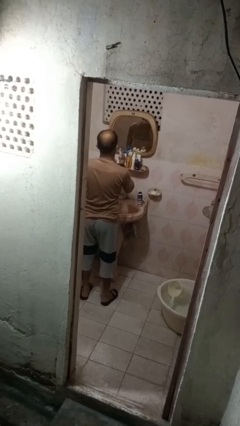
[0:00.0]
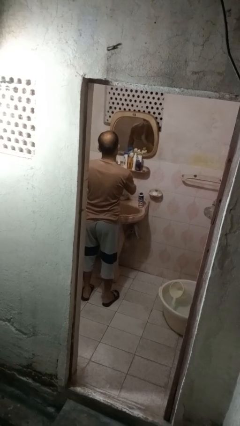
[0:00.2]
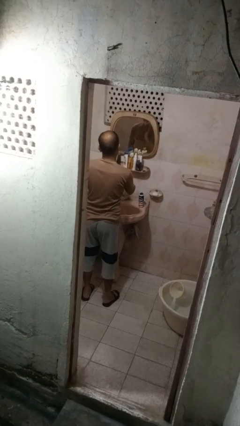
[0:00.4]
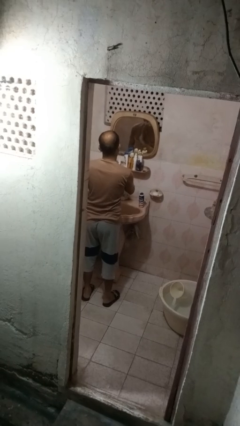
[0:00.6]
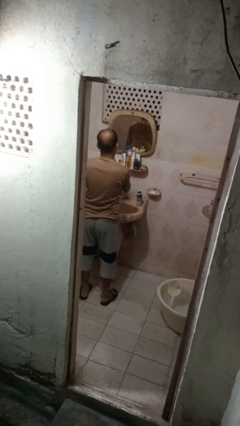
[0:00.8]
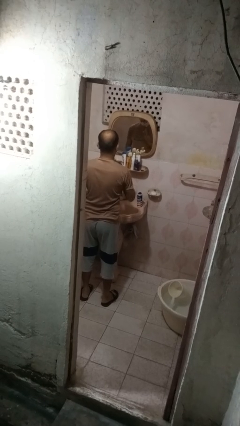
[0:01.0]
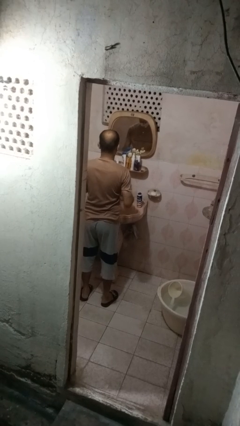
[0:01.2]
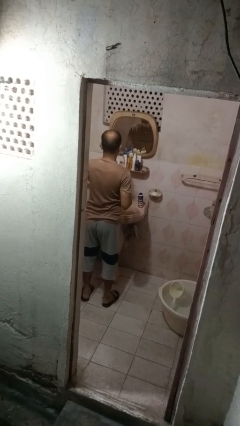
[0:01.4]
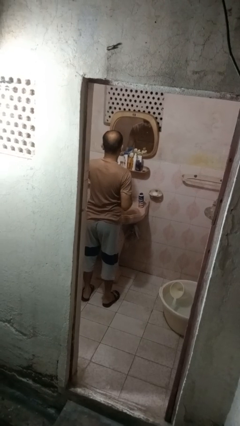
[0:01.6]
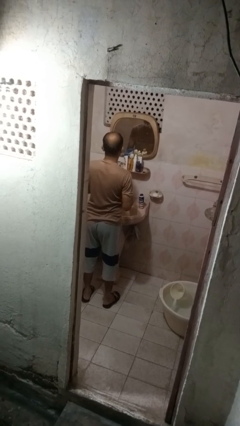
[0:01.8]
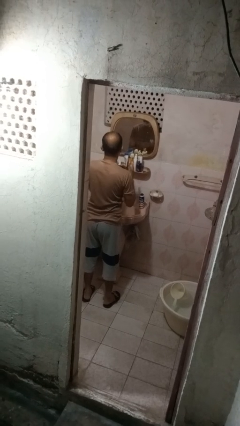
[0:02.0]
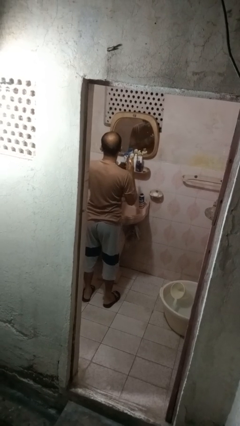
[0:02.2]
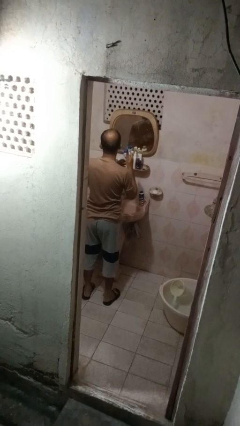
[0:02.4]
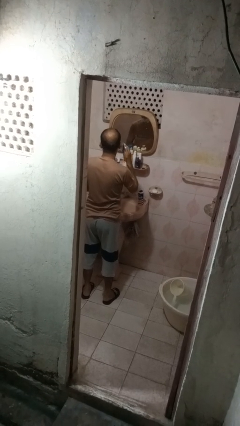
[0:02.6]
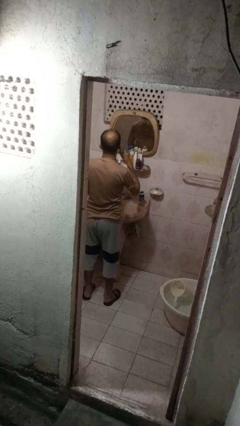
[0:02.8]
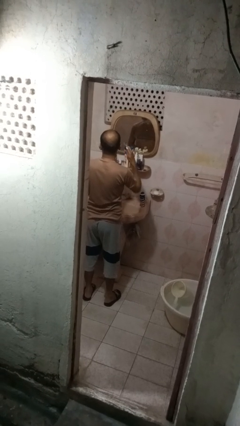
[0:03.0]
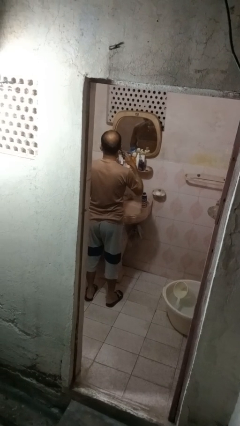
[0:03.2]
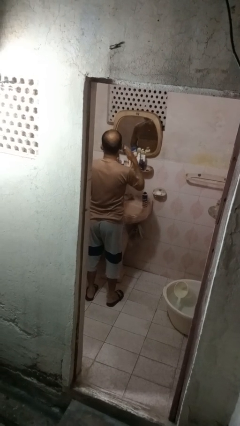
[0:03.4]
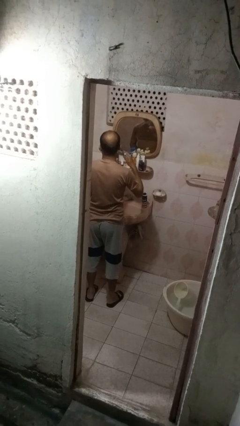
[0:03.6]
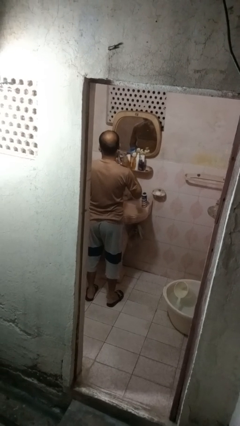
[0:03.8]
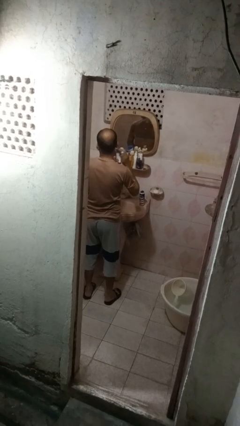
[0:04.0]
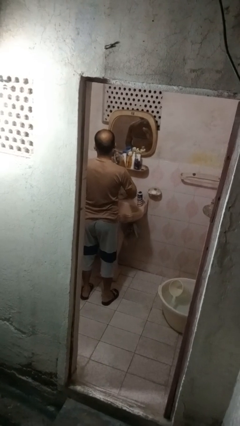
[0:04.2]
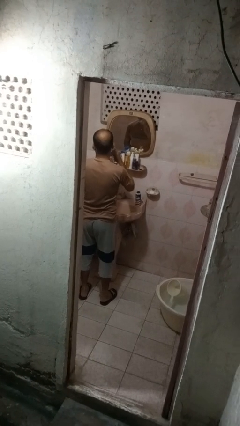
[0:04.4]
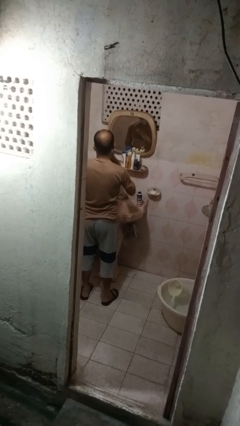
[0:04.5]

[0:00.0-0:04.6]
person shaves face

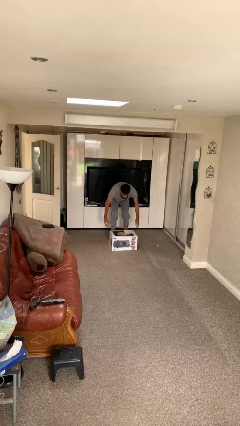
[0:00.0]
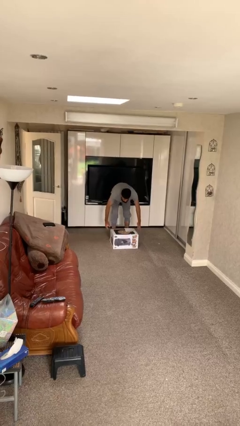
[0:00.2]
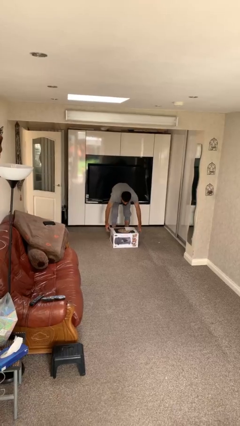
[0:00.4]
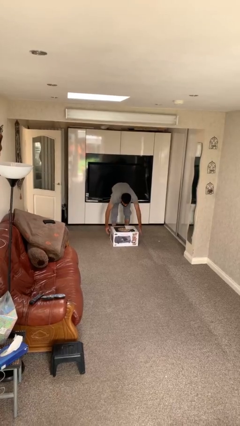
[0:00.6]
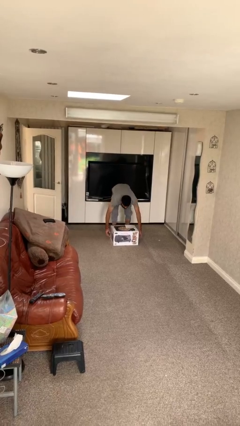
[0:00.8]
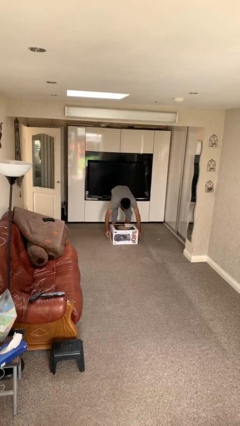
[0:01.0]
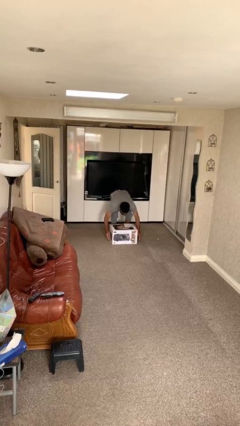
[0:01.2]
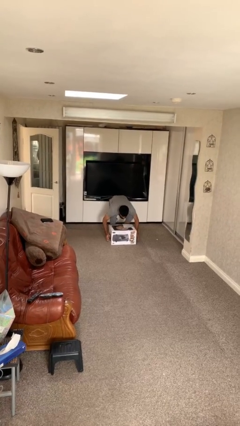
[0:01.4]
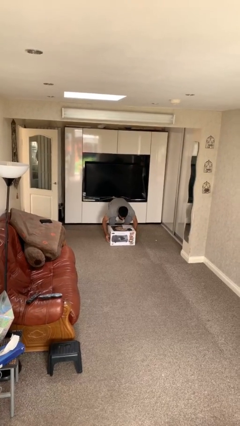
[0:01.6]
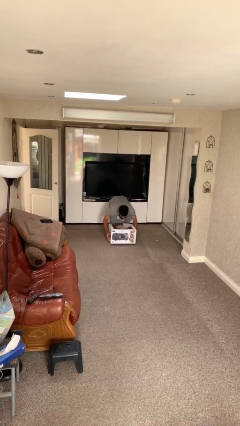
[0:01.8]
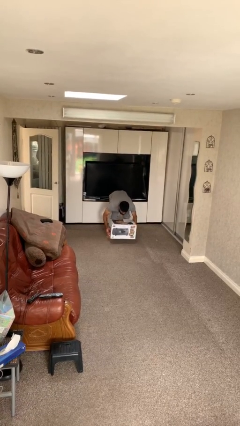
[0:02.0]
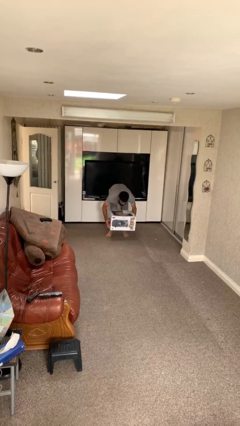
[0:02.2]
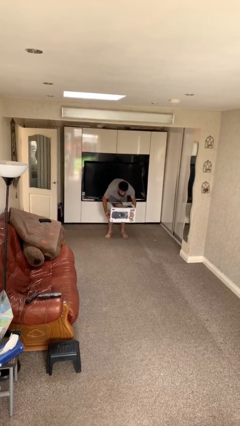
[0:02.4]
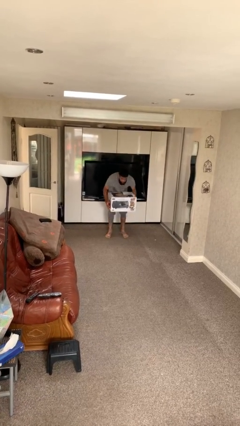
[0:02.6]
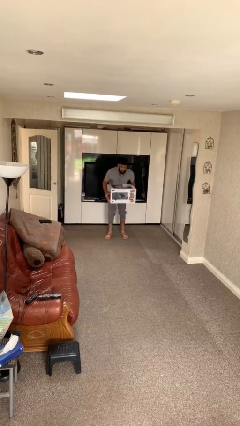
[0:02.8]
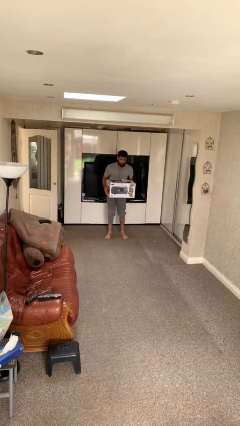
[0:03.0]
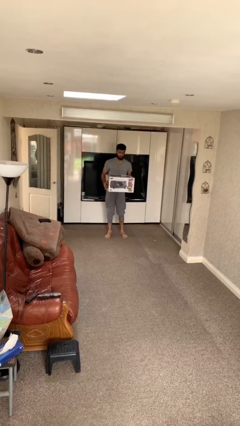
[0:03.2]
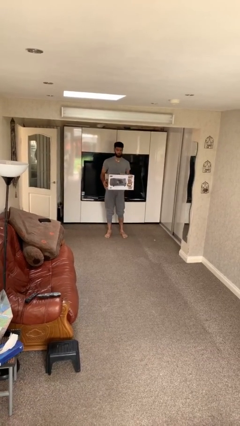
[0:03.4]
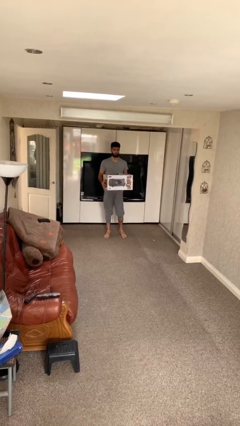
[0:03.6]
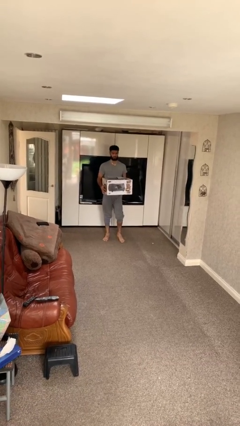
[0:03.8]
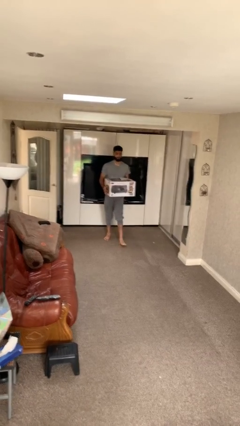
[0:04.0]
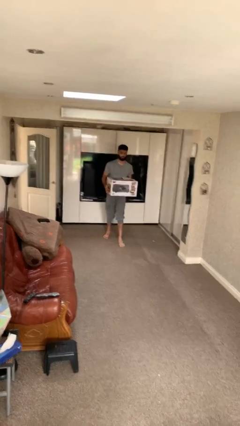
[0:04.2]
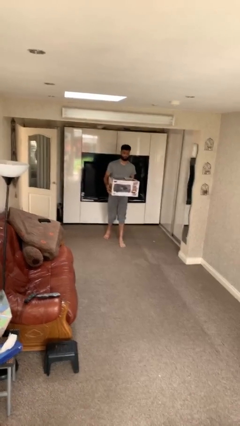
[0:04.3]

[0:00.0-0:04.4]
person picks up object from floor

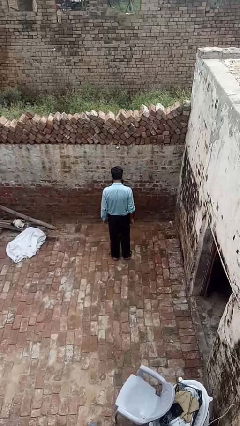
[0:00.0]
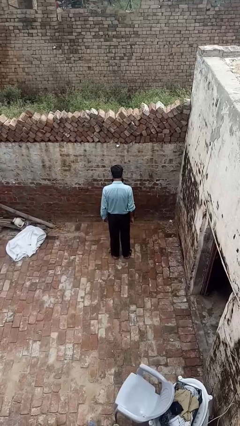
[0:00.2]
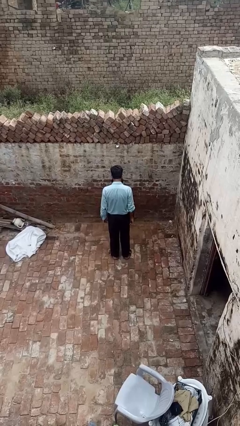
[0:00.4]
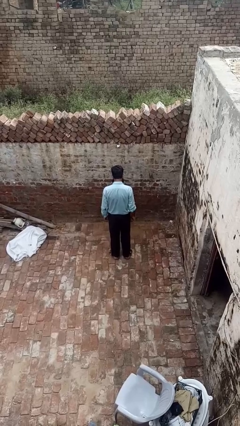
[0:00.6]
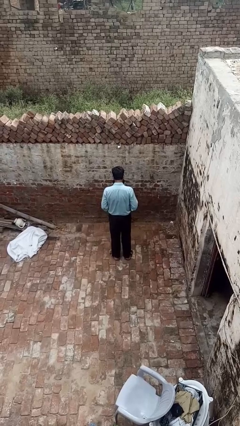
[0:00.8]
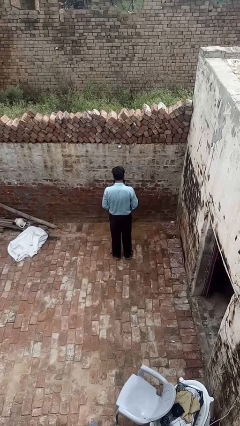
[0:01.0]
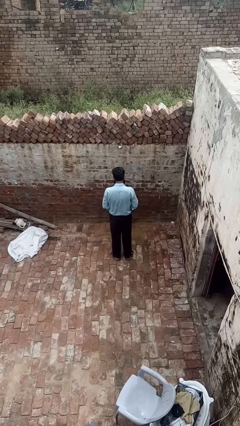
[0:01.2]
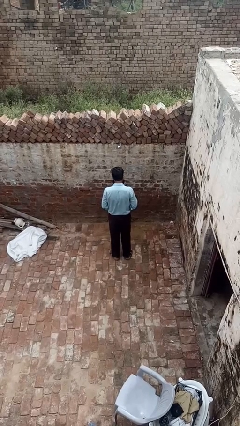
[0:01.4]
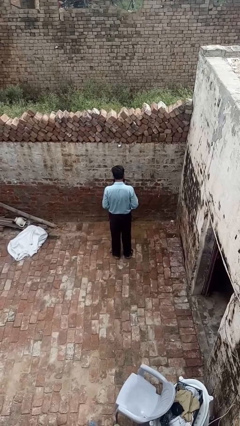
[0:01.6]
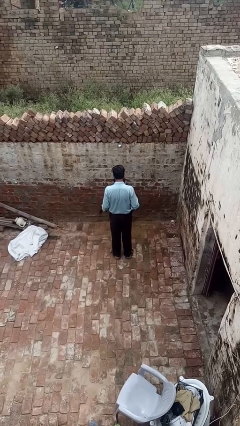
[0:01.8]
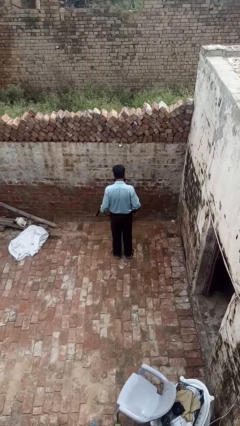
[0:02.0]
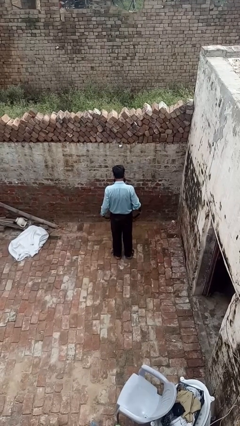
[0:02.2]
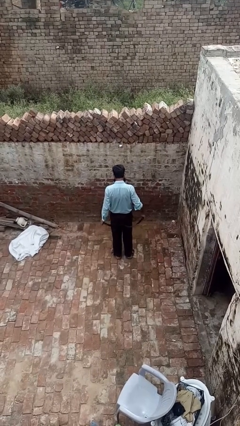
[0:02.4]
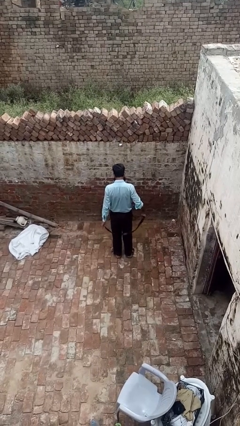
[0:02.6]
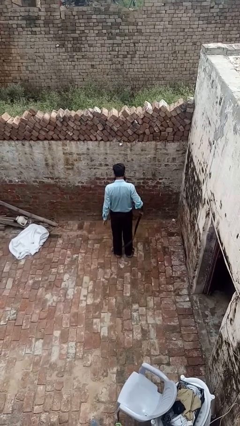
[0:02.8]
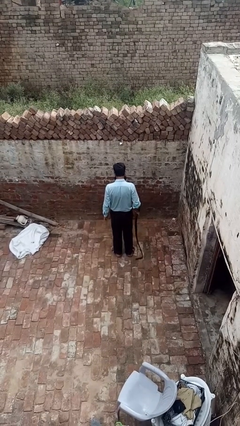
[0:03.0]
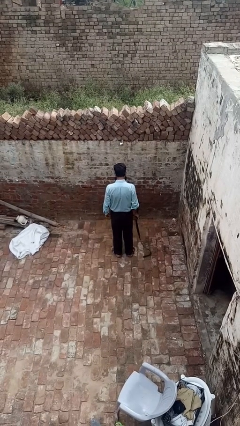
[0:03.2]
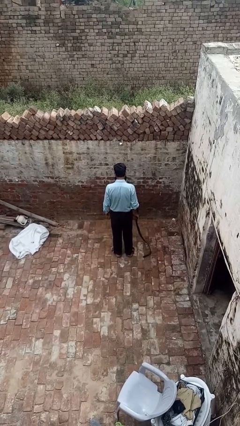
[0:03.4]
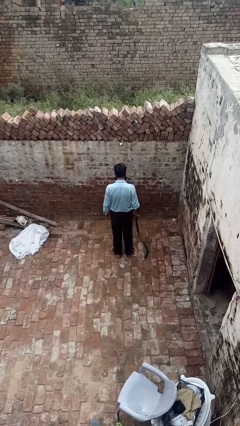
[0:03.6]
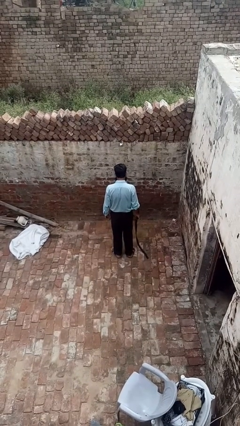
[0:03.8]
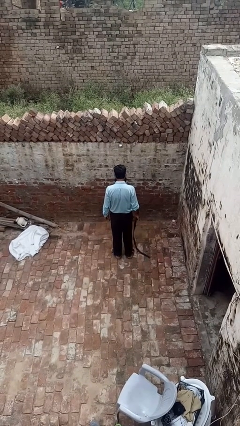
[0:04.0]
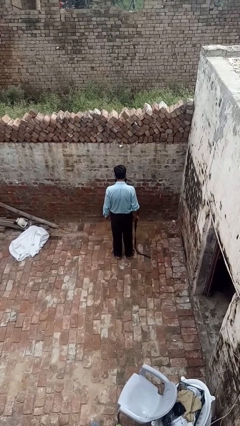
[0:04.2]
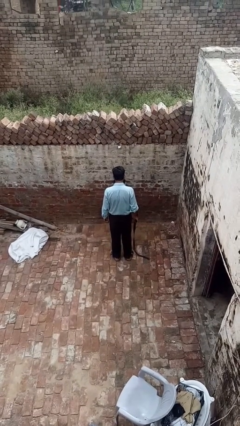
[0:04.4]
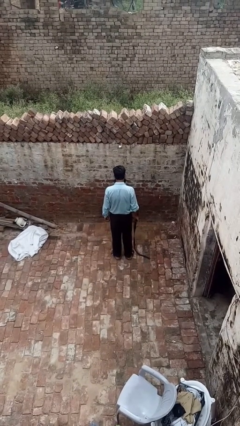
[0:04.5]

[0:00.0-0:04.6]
person takes off belt

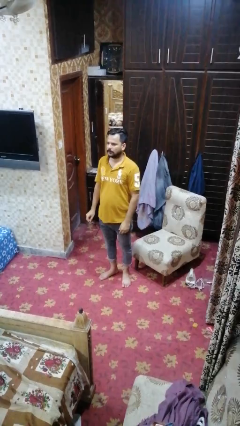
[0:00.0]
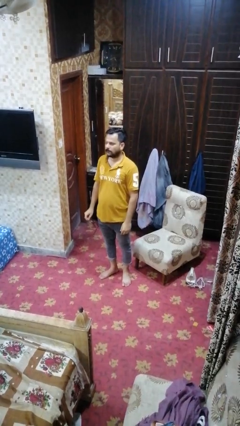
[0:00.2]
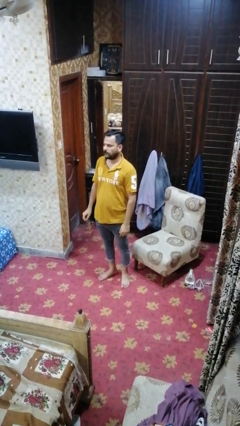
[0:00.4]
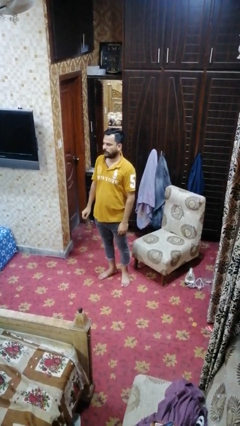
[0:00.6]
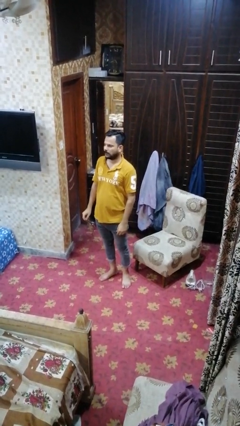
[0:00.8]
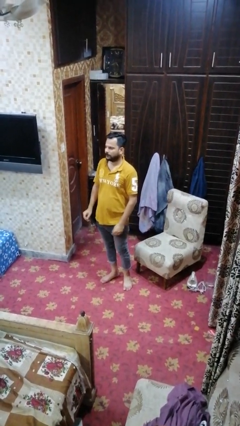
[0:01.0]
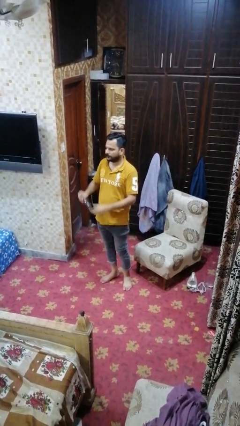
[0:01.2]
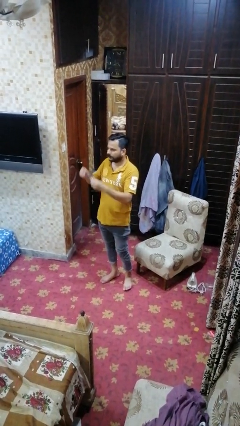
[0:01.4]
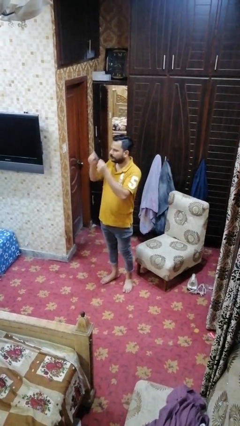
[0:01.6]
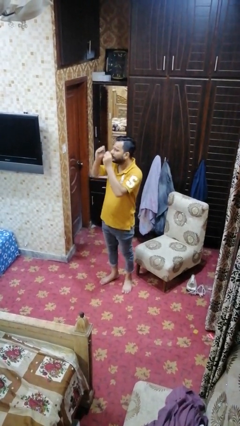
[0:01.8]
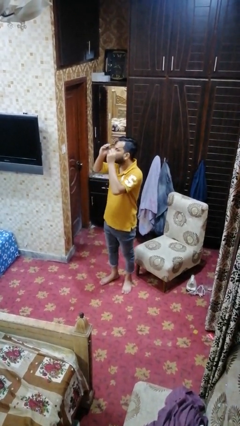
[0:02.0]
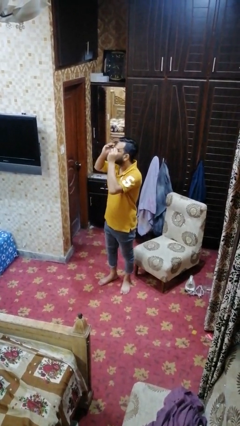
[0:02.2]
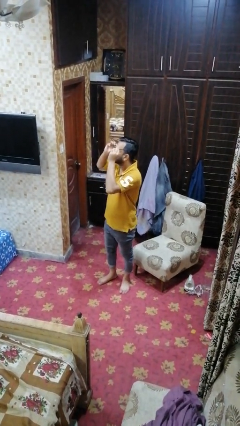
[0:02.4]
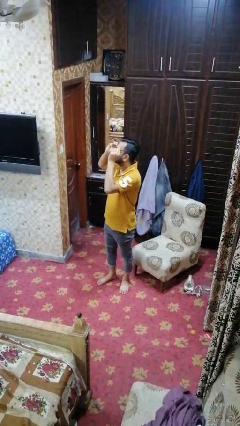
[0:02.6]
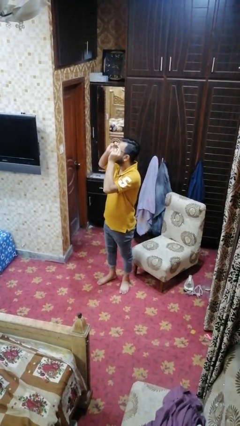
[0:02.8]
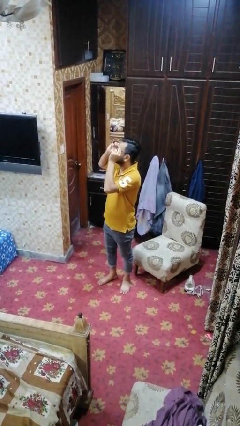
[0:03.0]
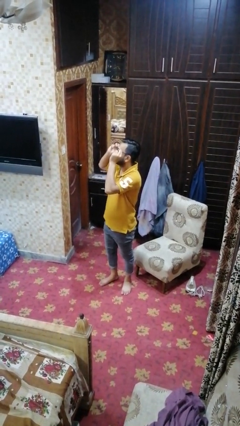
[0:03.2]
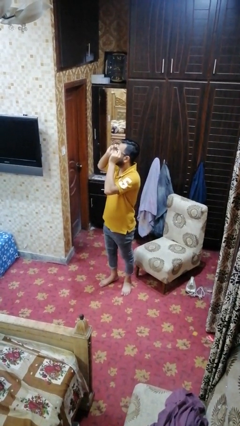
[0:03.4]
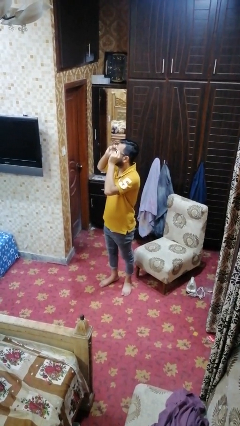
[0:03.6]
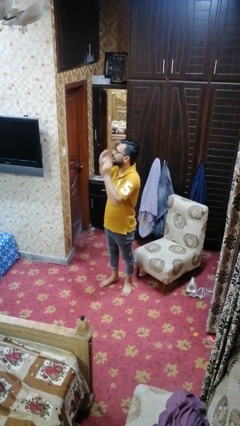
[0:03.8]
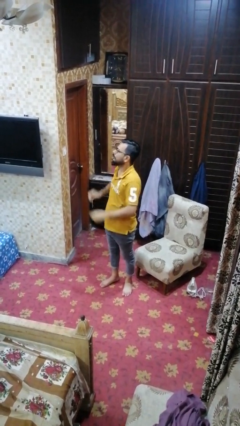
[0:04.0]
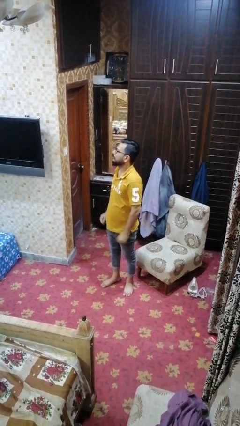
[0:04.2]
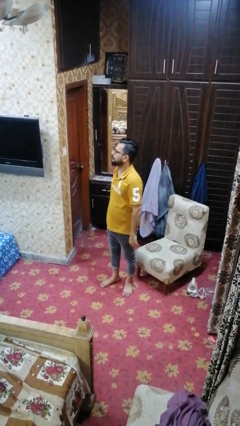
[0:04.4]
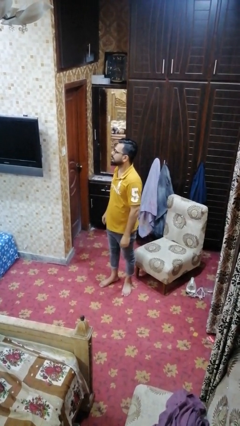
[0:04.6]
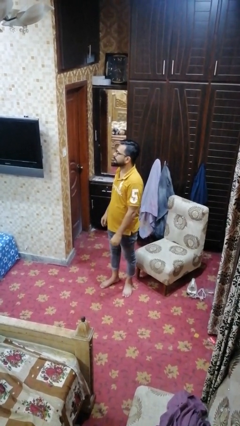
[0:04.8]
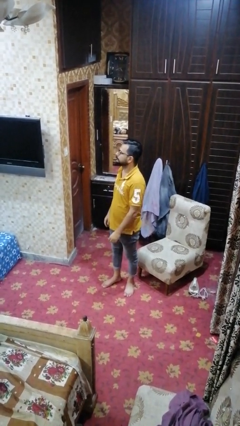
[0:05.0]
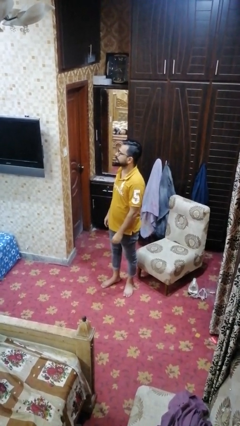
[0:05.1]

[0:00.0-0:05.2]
person puts on glasses
